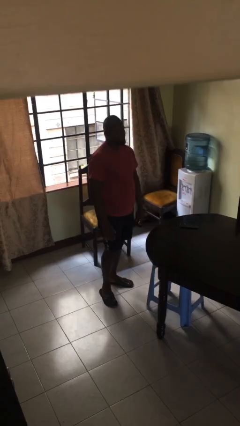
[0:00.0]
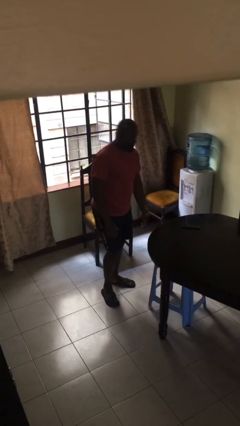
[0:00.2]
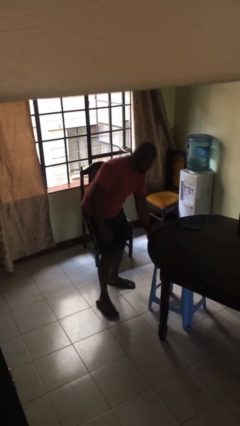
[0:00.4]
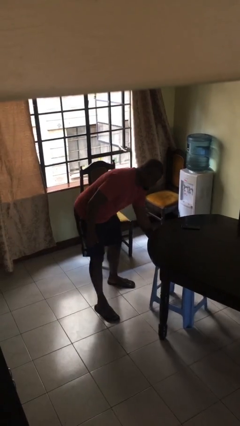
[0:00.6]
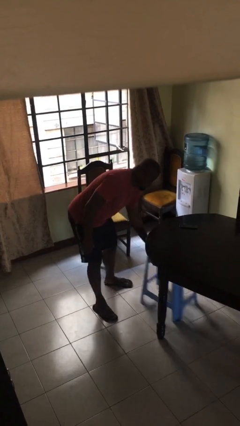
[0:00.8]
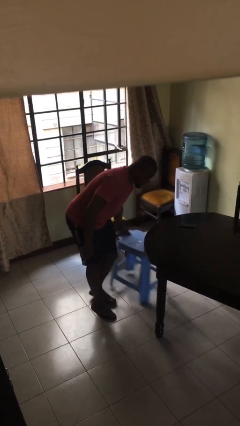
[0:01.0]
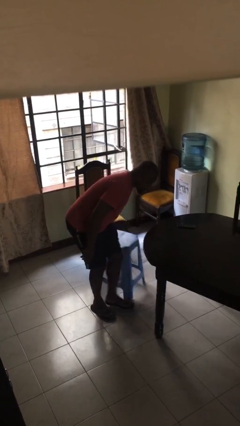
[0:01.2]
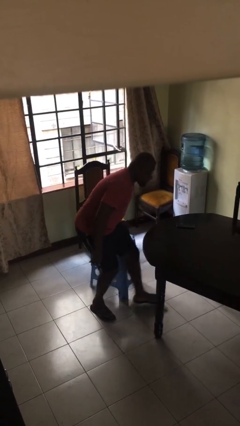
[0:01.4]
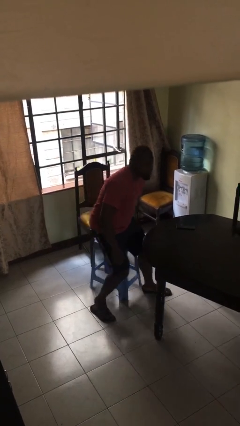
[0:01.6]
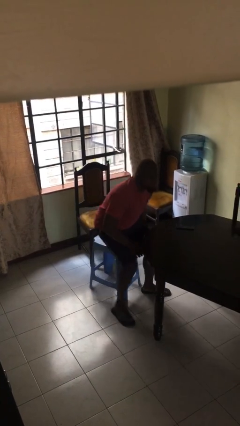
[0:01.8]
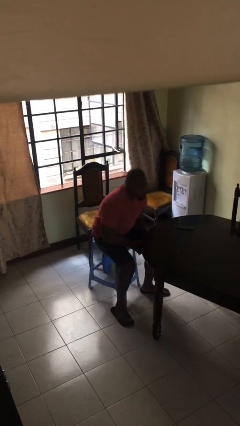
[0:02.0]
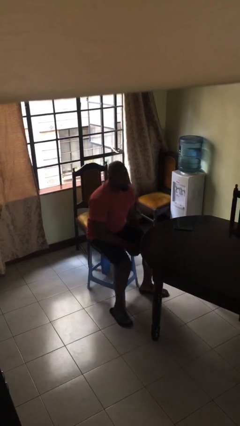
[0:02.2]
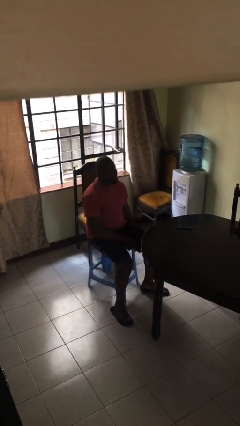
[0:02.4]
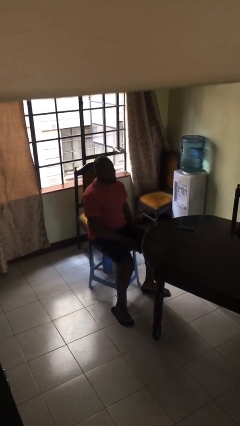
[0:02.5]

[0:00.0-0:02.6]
person sits down

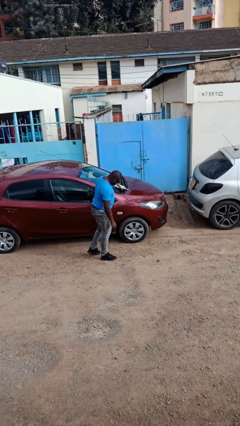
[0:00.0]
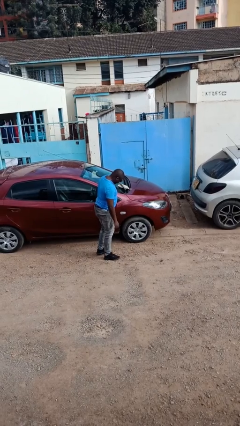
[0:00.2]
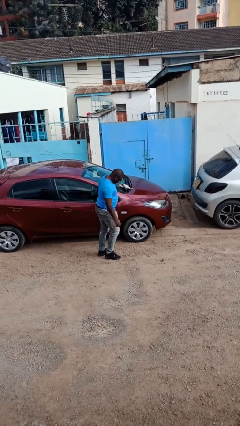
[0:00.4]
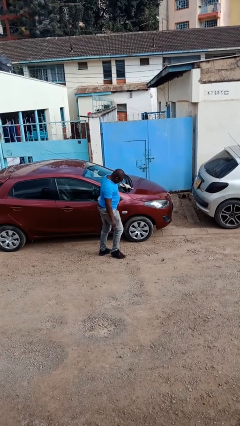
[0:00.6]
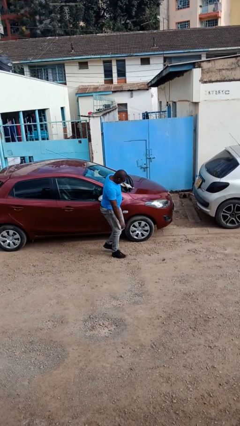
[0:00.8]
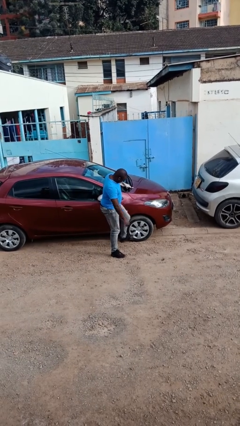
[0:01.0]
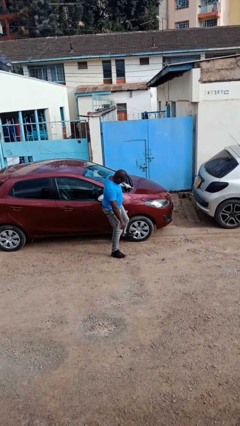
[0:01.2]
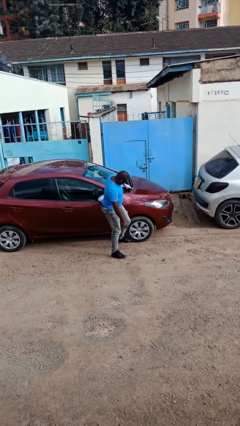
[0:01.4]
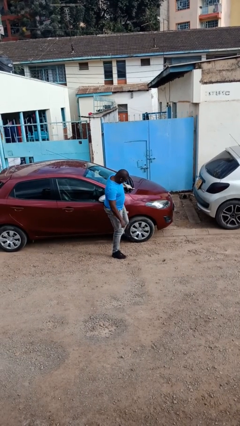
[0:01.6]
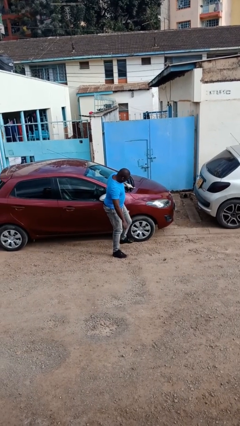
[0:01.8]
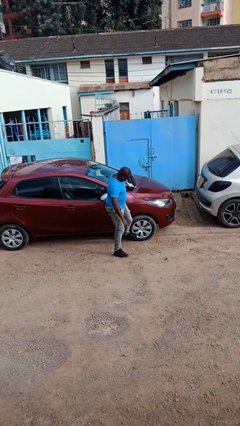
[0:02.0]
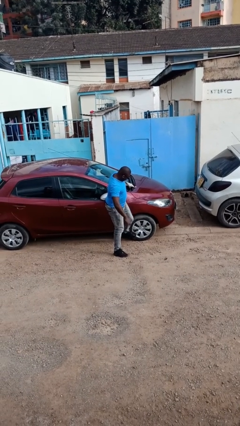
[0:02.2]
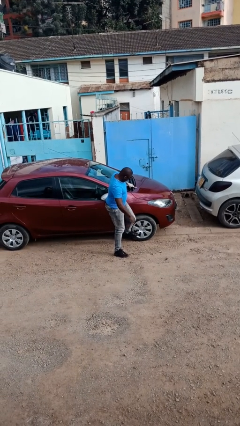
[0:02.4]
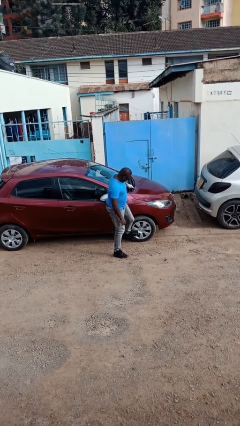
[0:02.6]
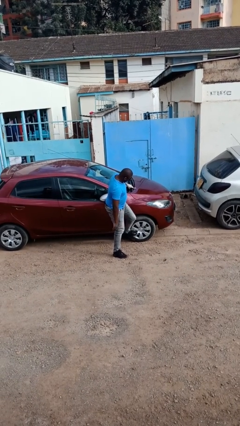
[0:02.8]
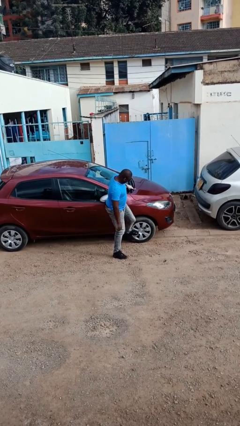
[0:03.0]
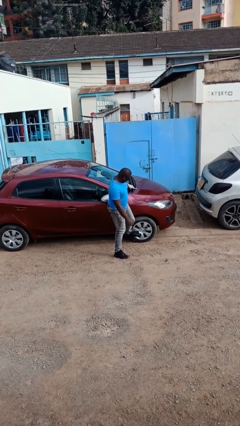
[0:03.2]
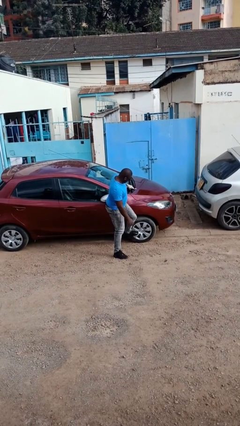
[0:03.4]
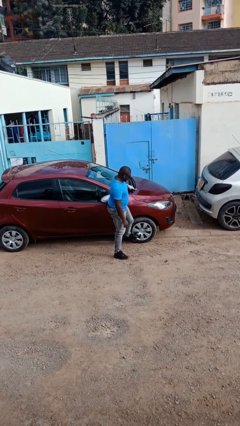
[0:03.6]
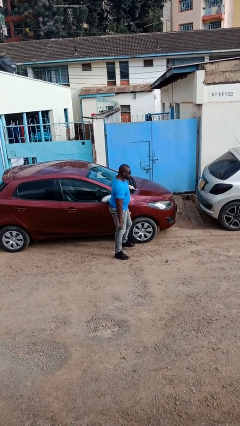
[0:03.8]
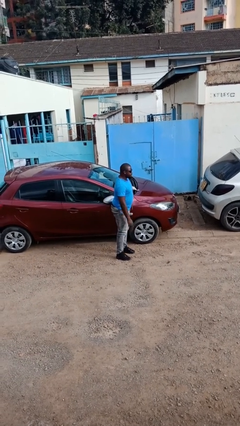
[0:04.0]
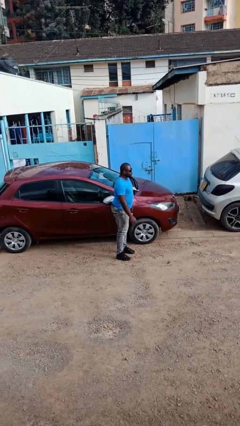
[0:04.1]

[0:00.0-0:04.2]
person kicks car tires

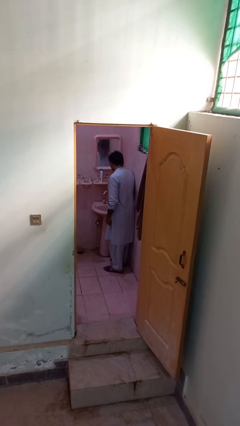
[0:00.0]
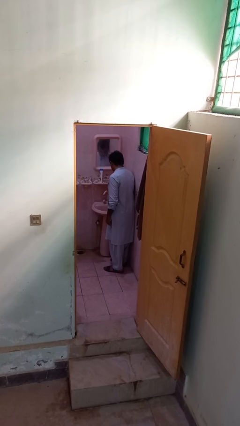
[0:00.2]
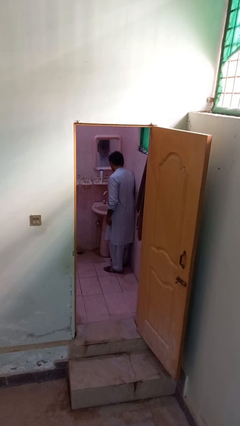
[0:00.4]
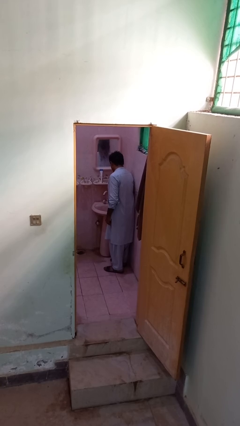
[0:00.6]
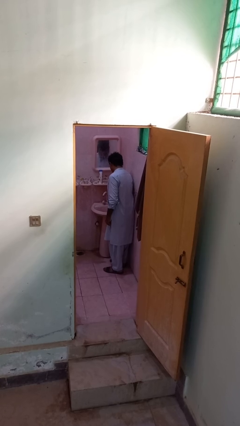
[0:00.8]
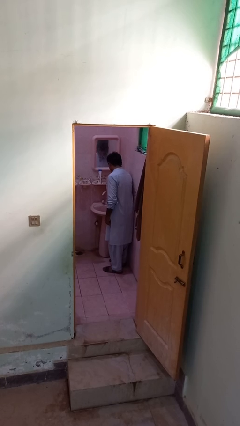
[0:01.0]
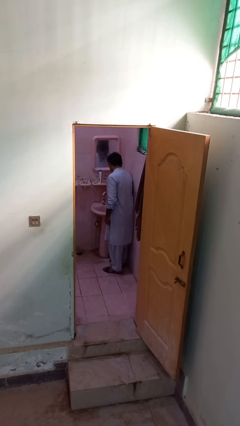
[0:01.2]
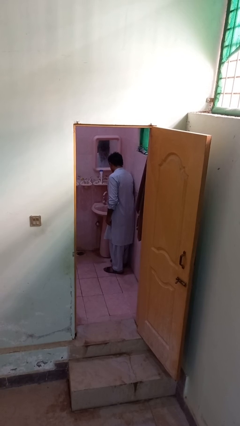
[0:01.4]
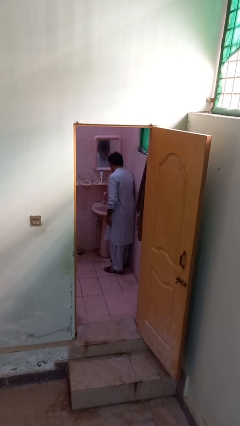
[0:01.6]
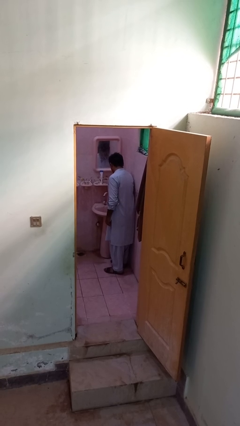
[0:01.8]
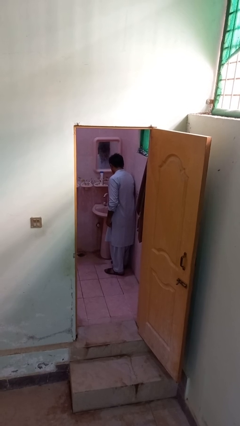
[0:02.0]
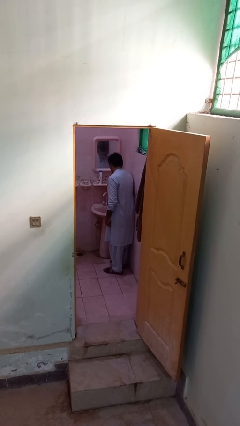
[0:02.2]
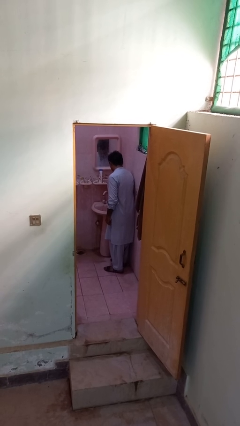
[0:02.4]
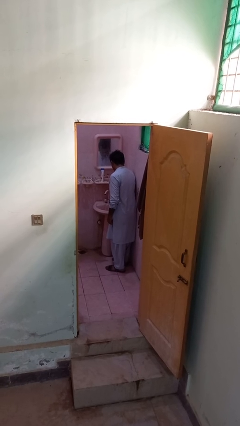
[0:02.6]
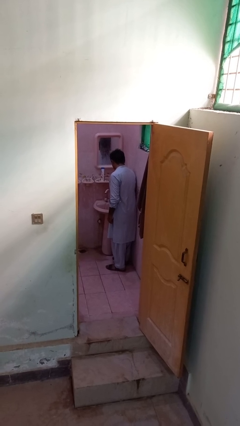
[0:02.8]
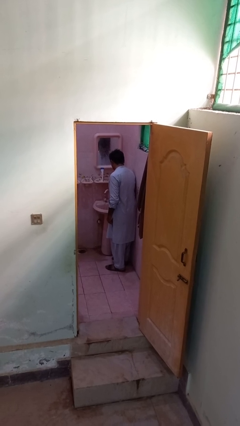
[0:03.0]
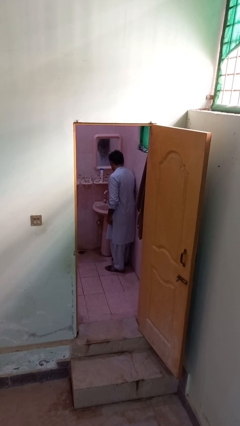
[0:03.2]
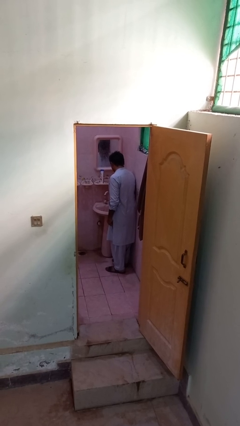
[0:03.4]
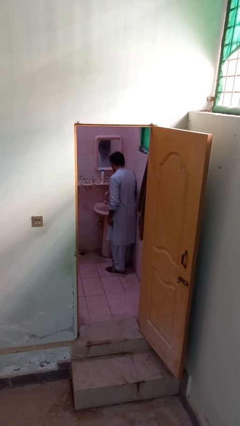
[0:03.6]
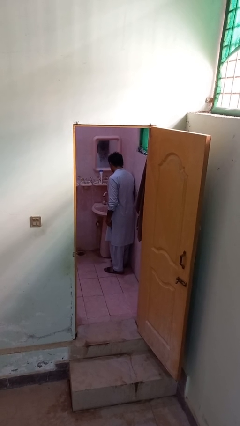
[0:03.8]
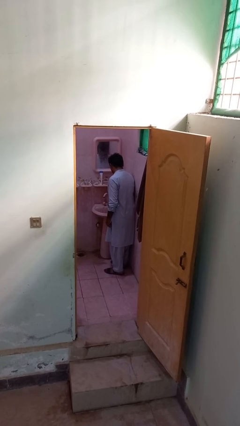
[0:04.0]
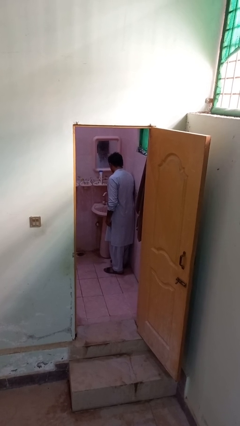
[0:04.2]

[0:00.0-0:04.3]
person turns on faucet

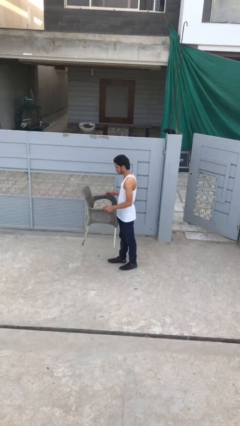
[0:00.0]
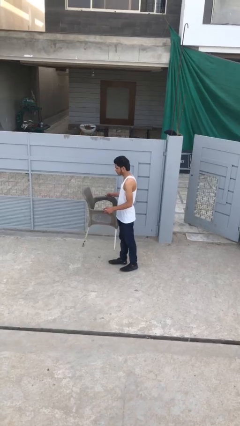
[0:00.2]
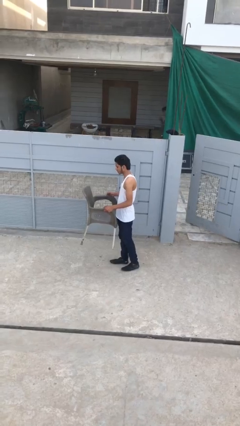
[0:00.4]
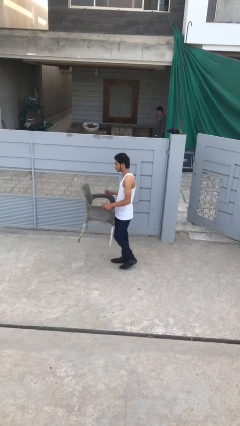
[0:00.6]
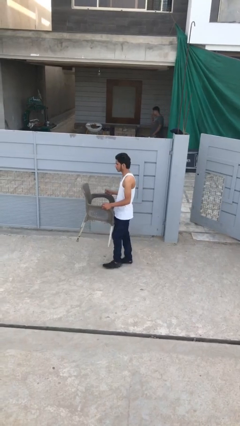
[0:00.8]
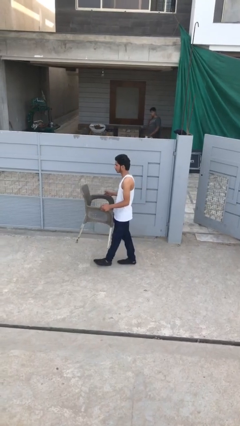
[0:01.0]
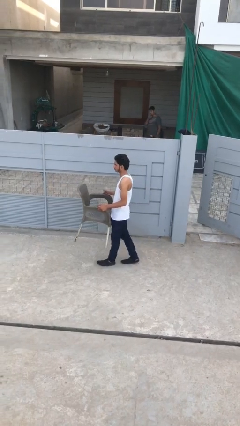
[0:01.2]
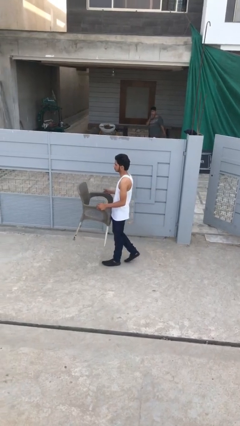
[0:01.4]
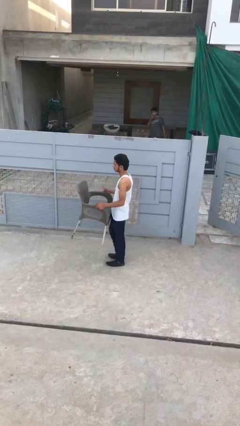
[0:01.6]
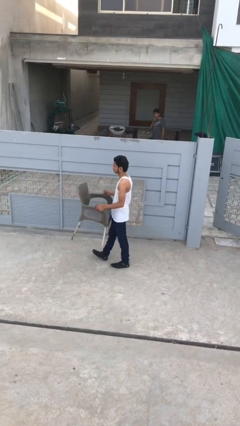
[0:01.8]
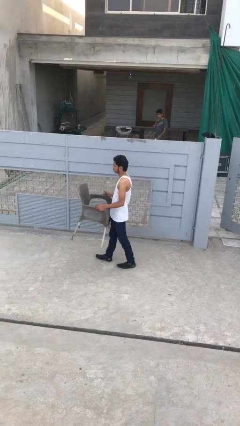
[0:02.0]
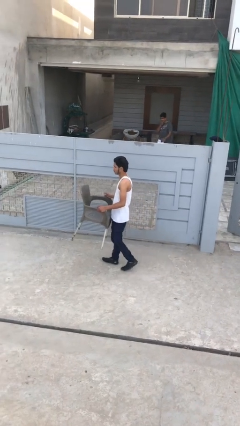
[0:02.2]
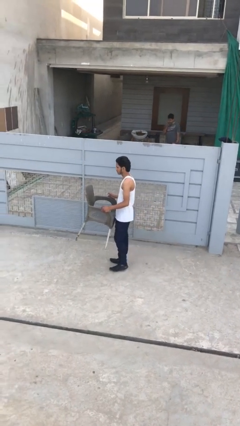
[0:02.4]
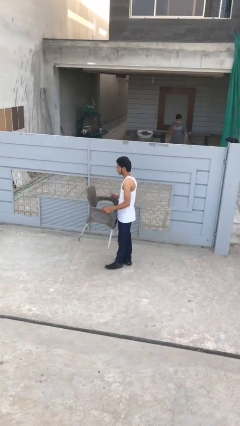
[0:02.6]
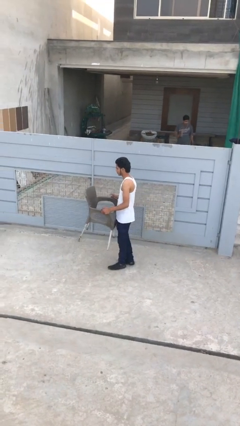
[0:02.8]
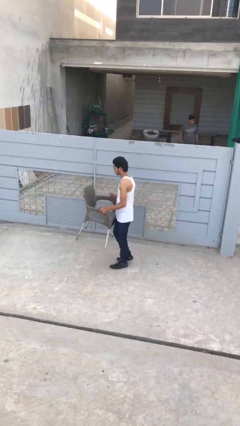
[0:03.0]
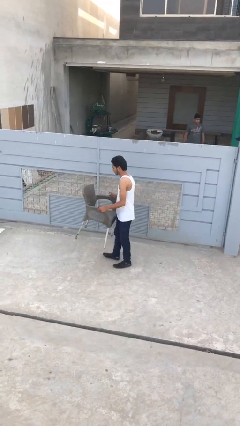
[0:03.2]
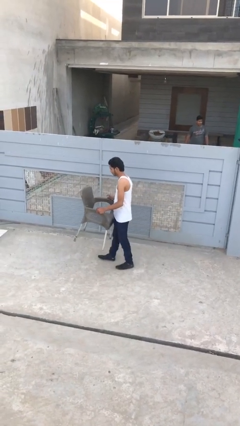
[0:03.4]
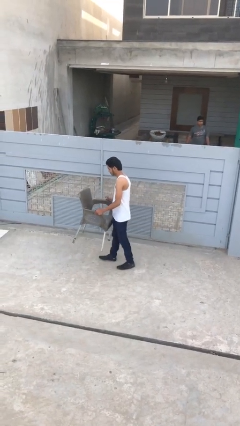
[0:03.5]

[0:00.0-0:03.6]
person carries heavy object

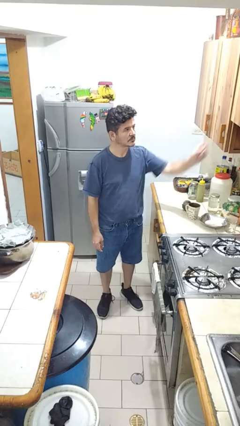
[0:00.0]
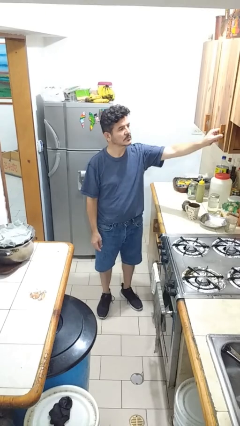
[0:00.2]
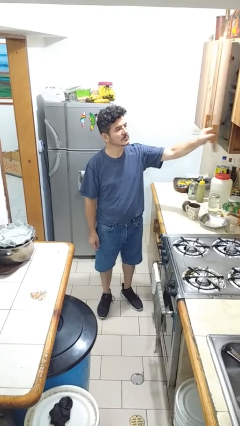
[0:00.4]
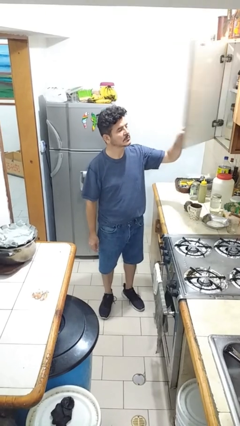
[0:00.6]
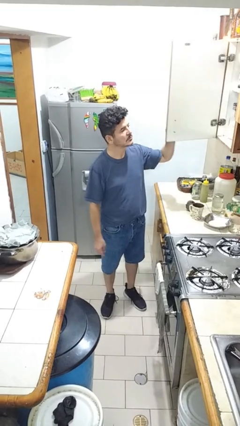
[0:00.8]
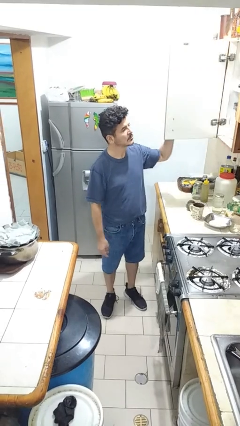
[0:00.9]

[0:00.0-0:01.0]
person opens cabinet

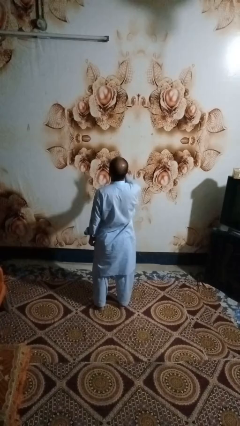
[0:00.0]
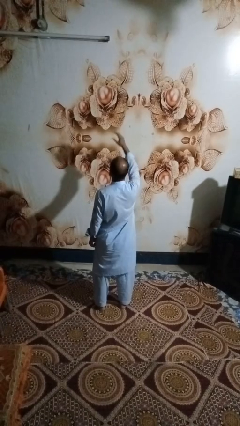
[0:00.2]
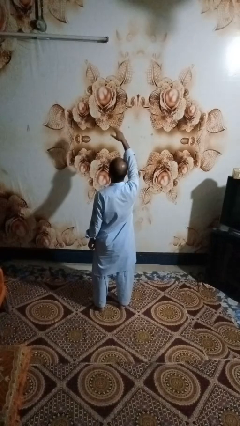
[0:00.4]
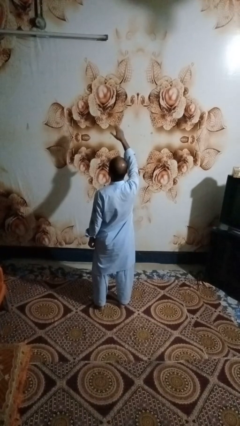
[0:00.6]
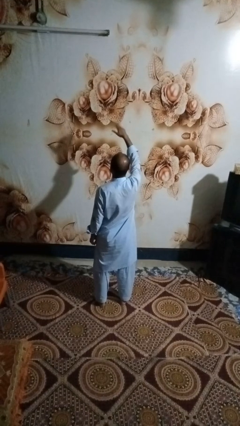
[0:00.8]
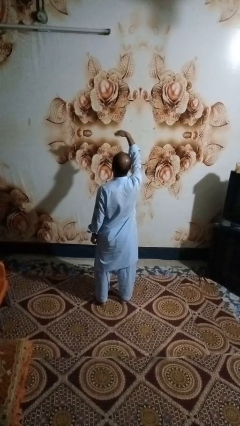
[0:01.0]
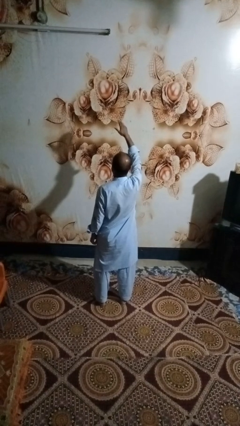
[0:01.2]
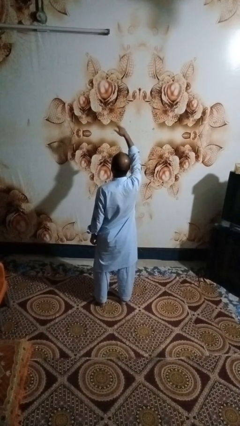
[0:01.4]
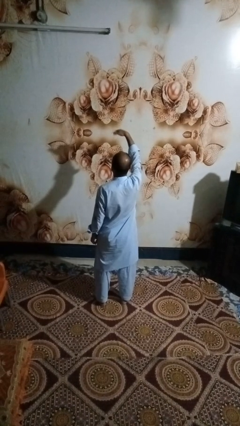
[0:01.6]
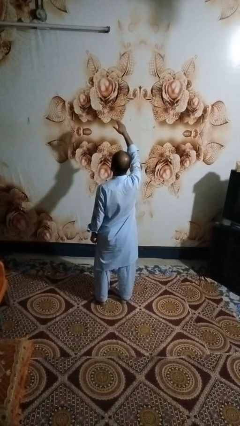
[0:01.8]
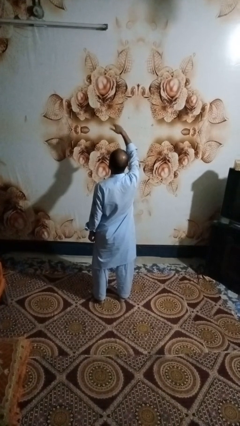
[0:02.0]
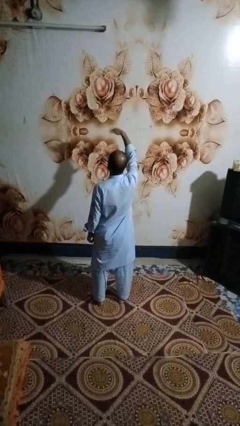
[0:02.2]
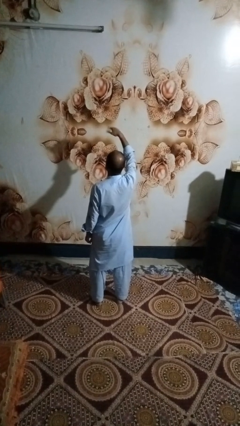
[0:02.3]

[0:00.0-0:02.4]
person gestures come here
